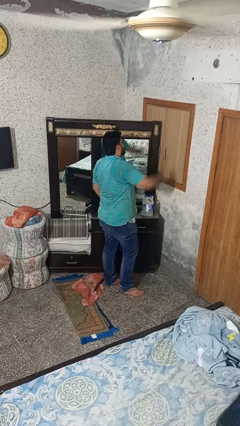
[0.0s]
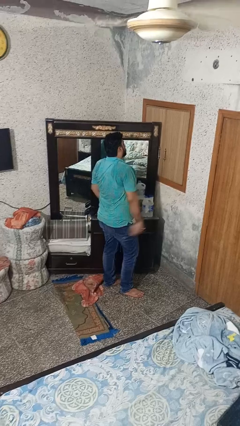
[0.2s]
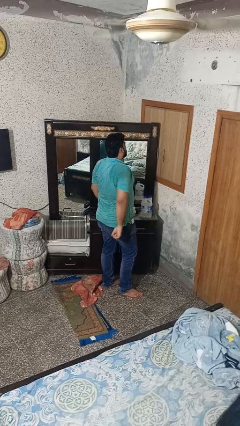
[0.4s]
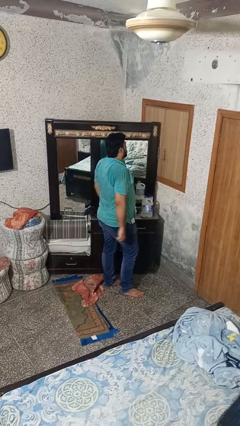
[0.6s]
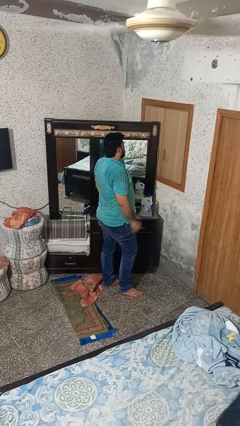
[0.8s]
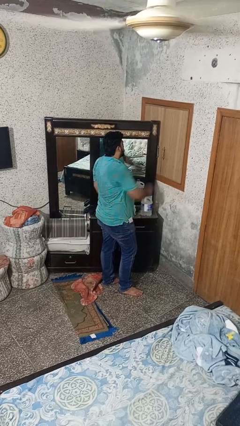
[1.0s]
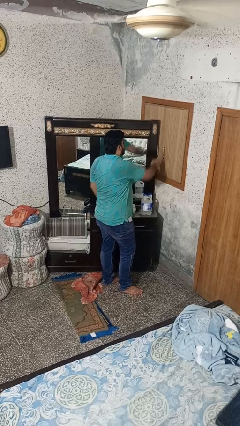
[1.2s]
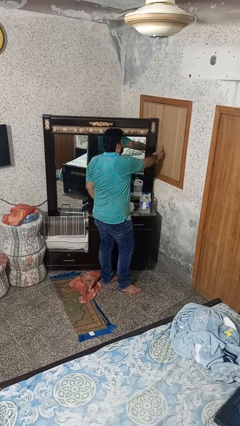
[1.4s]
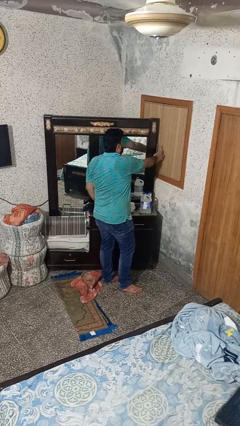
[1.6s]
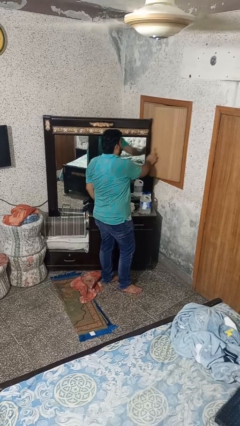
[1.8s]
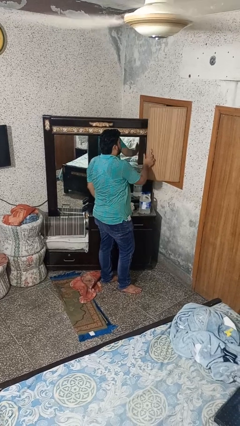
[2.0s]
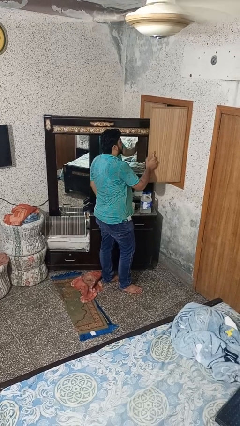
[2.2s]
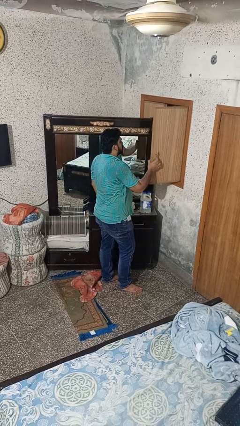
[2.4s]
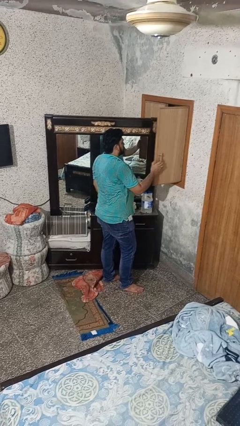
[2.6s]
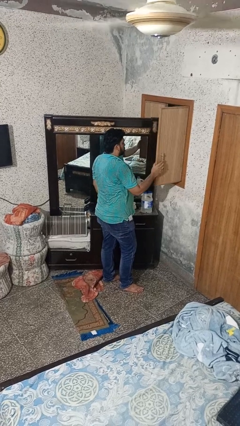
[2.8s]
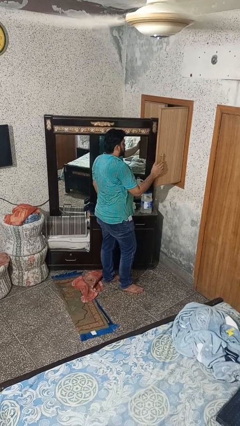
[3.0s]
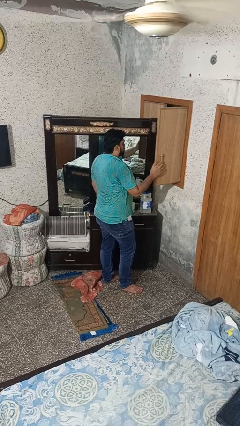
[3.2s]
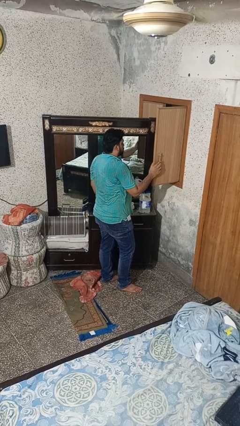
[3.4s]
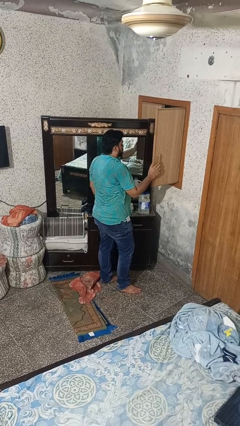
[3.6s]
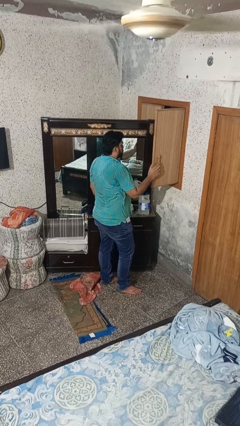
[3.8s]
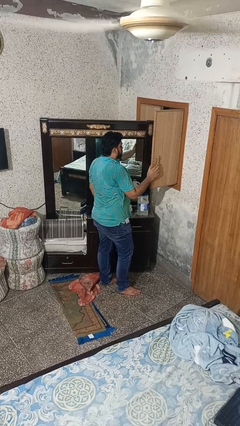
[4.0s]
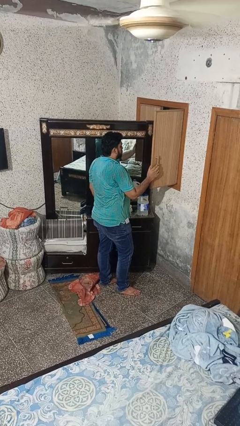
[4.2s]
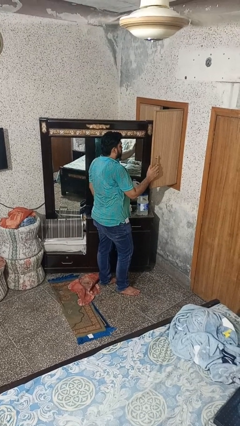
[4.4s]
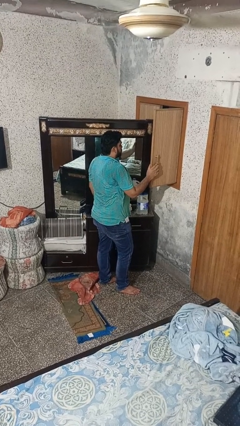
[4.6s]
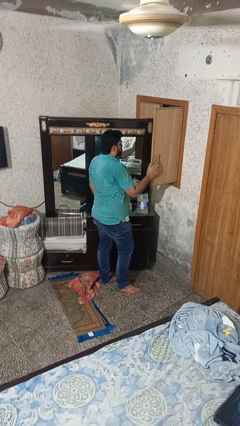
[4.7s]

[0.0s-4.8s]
person opens home window

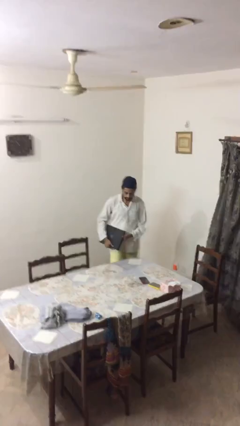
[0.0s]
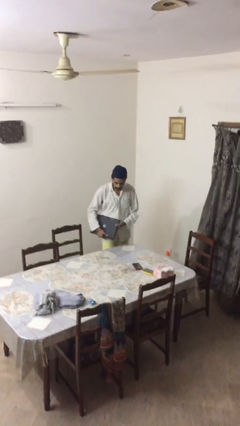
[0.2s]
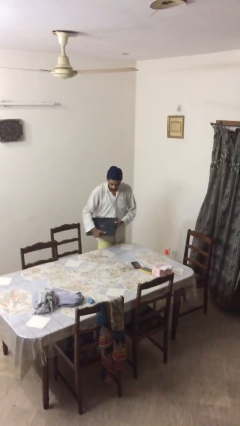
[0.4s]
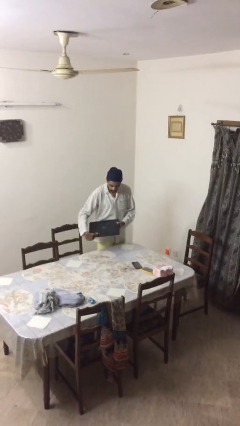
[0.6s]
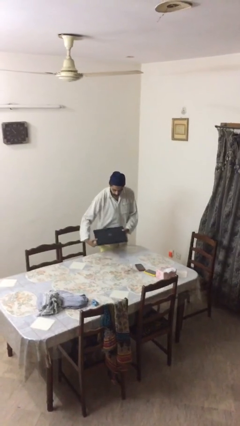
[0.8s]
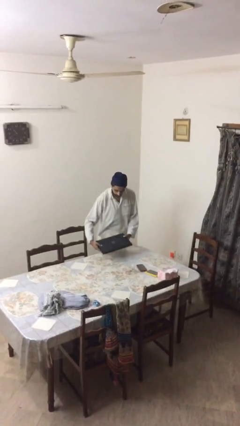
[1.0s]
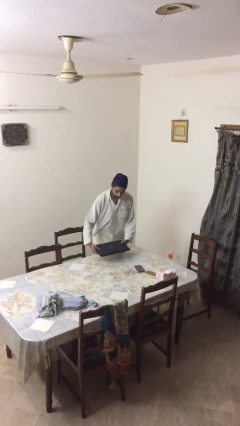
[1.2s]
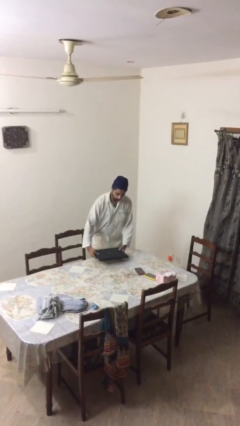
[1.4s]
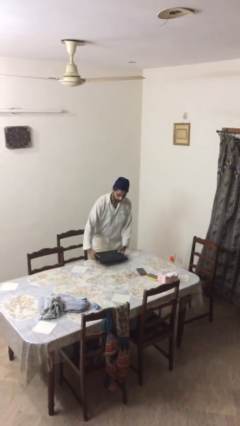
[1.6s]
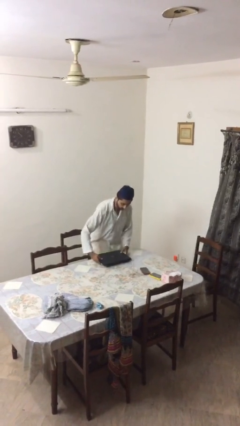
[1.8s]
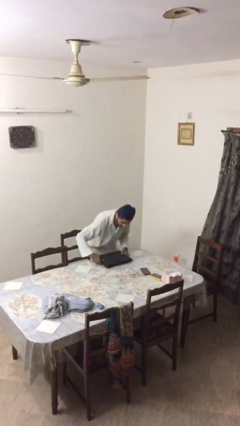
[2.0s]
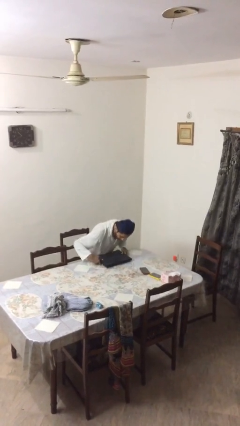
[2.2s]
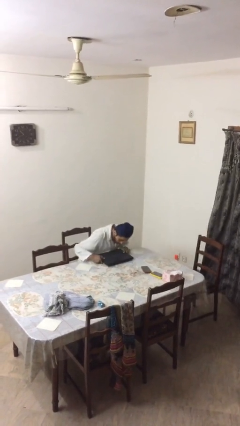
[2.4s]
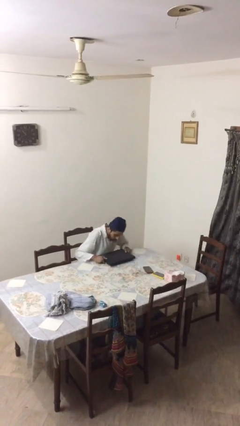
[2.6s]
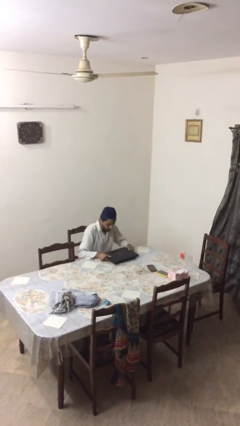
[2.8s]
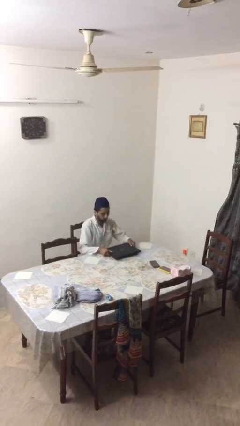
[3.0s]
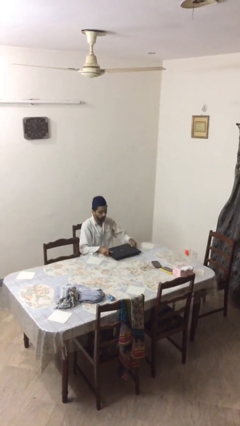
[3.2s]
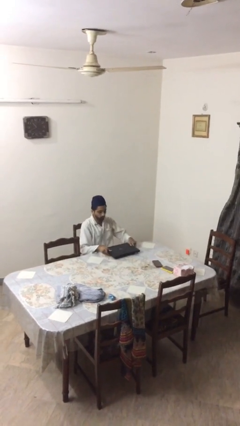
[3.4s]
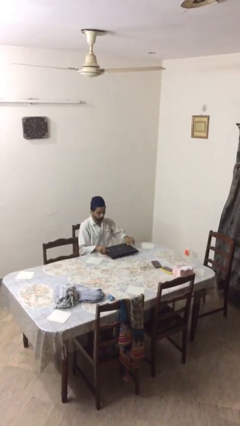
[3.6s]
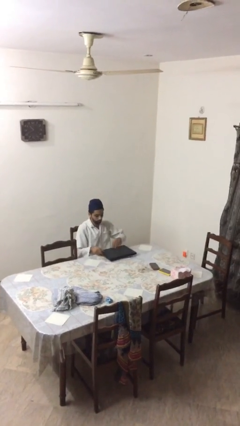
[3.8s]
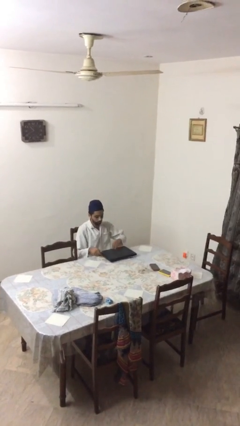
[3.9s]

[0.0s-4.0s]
person sits down

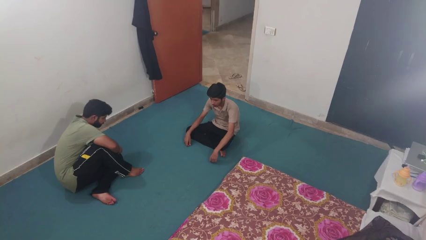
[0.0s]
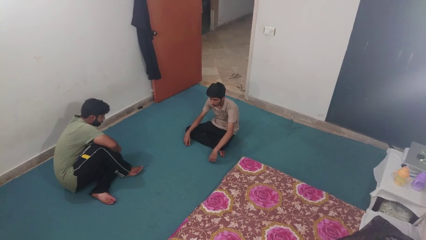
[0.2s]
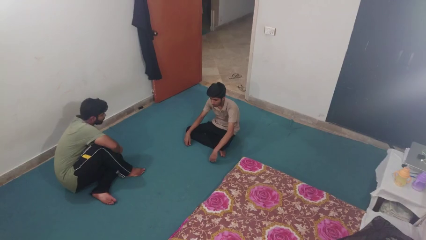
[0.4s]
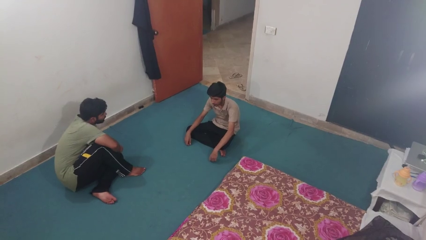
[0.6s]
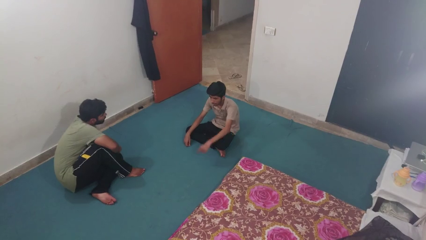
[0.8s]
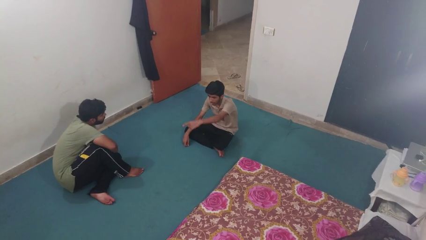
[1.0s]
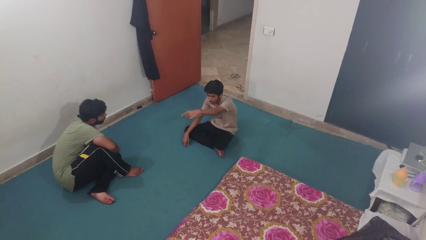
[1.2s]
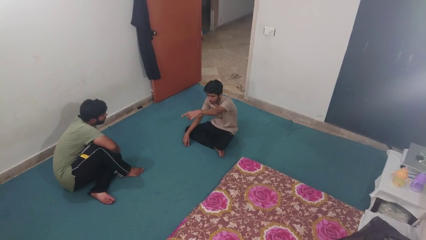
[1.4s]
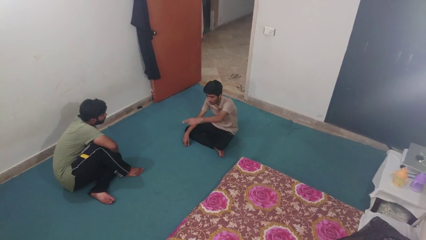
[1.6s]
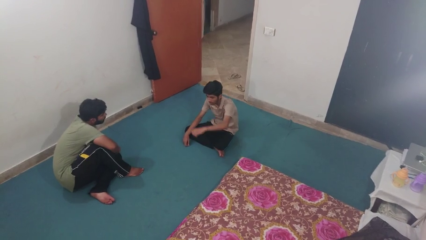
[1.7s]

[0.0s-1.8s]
person points at person

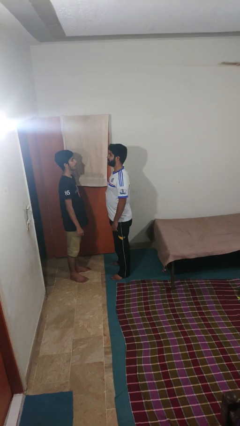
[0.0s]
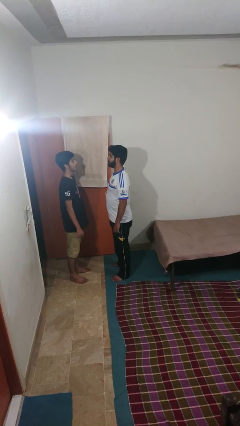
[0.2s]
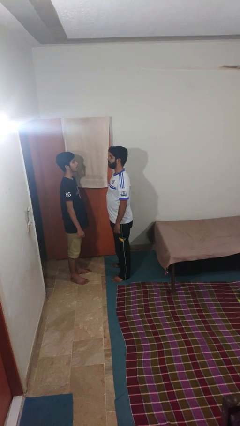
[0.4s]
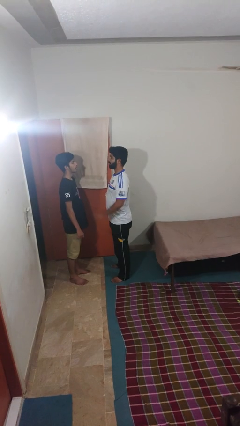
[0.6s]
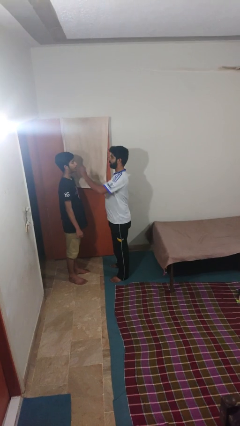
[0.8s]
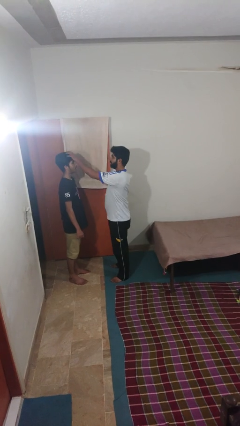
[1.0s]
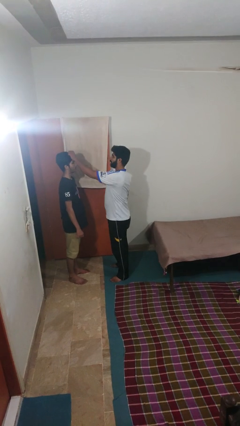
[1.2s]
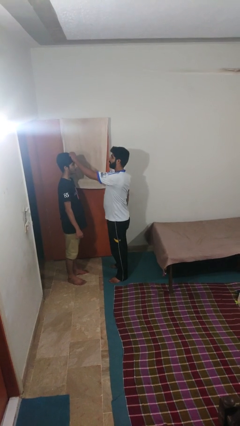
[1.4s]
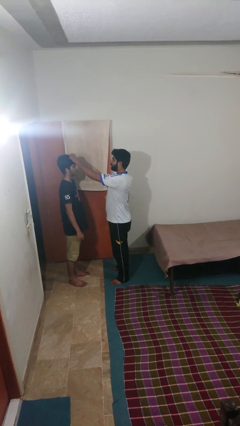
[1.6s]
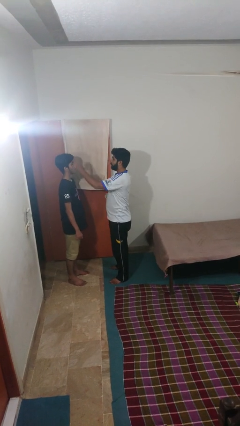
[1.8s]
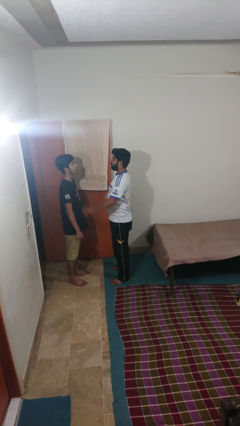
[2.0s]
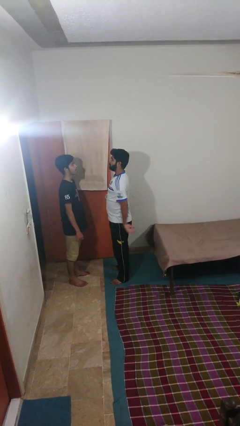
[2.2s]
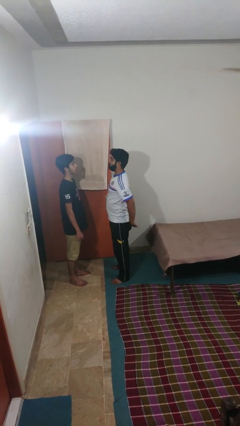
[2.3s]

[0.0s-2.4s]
person grabs person by hair

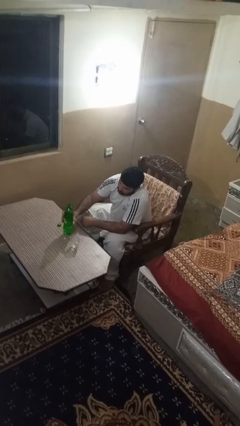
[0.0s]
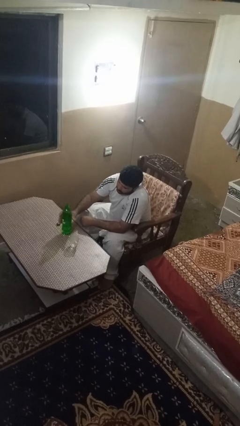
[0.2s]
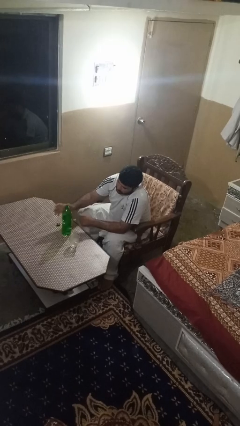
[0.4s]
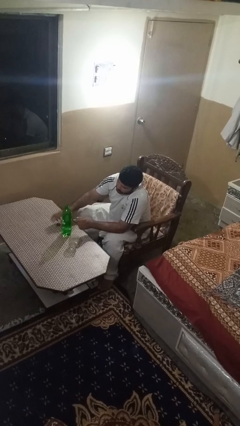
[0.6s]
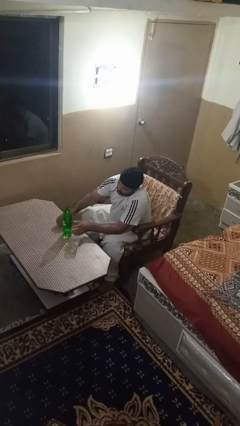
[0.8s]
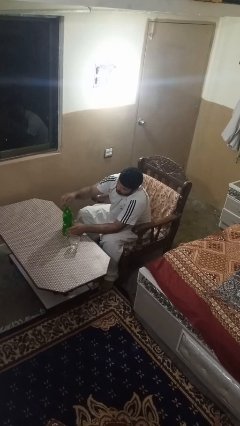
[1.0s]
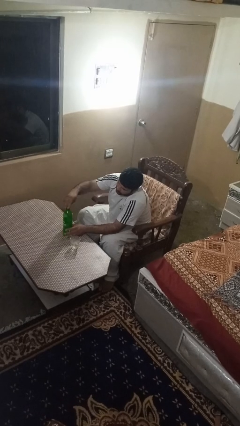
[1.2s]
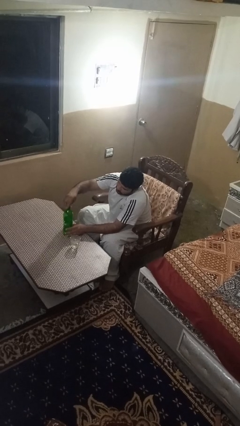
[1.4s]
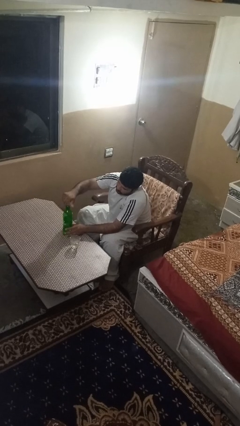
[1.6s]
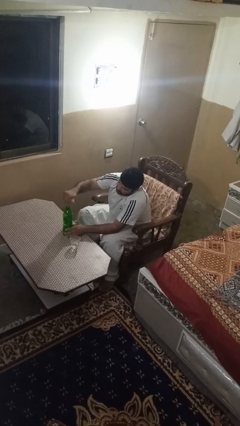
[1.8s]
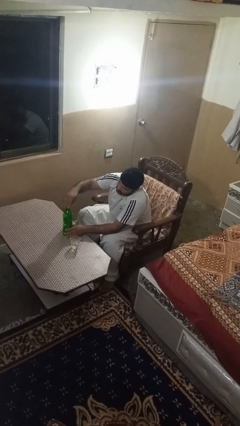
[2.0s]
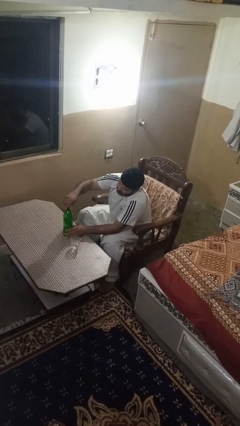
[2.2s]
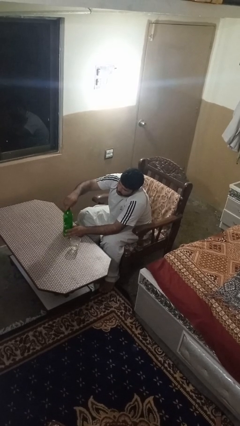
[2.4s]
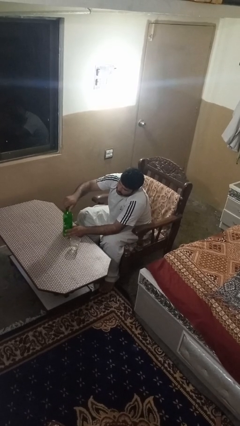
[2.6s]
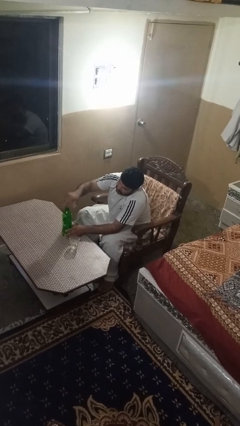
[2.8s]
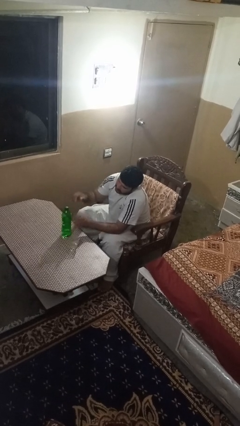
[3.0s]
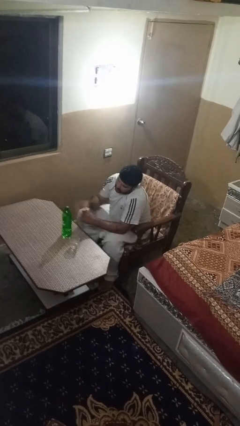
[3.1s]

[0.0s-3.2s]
person screws lid to bottle

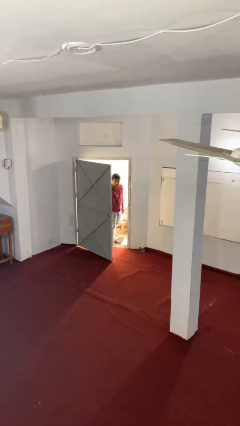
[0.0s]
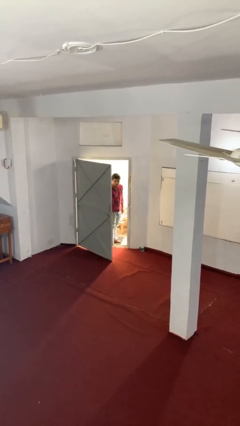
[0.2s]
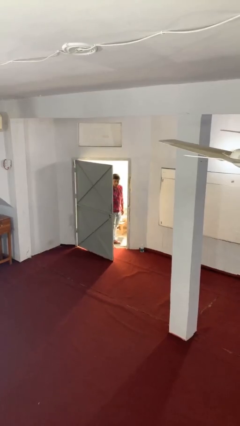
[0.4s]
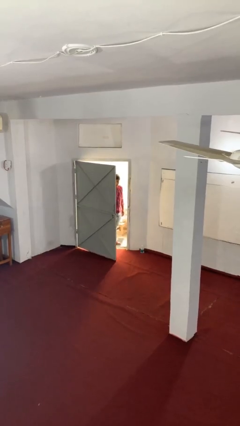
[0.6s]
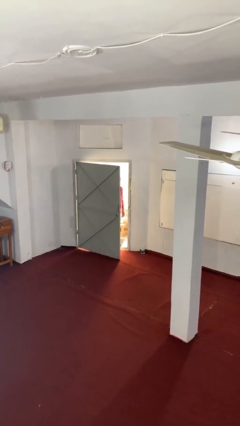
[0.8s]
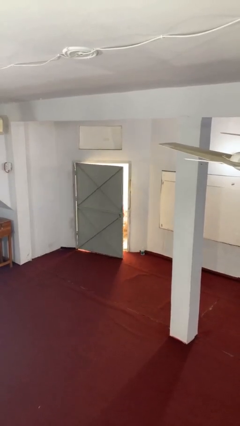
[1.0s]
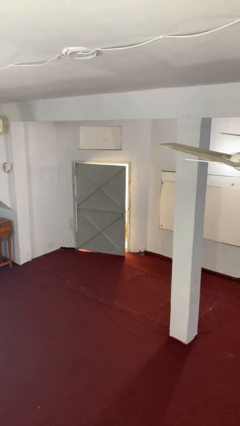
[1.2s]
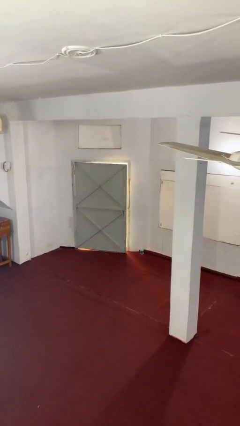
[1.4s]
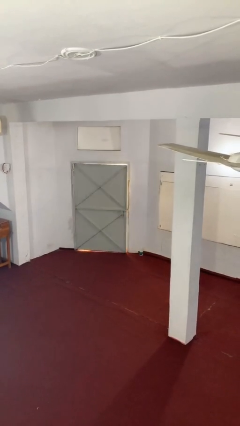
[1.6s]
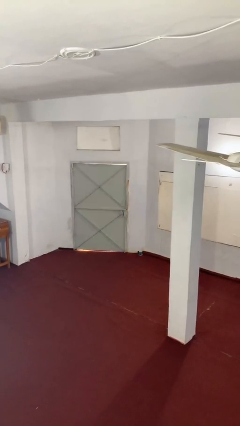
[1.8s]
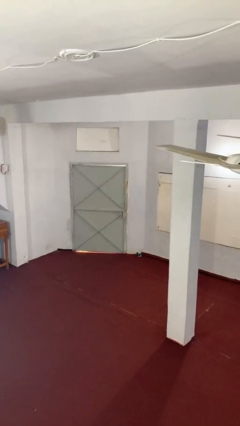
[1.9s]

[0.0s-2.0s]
person closes facility door
